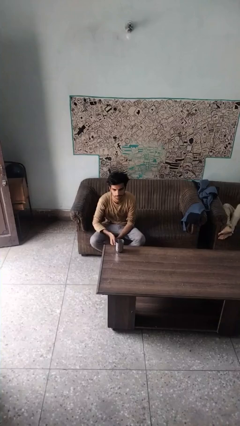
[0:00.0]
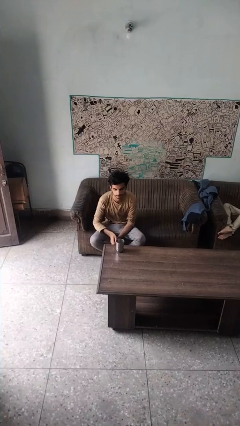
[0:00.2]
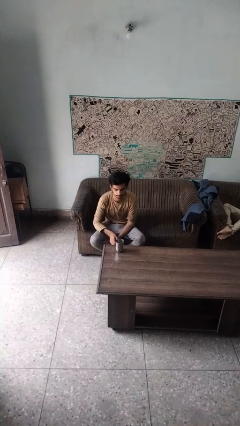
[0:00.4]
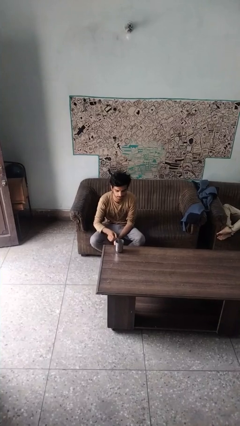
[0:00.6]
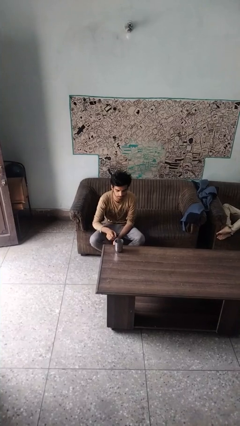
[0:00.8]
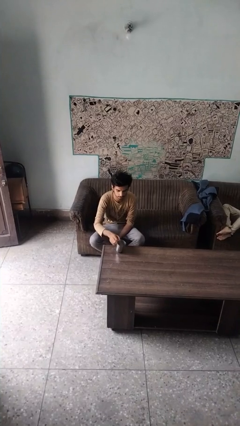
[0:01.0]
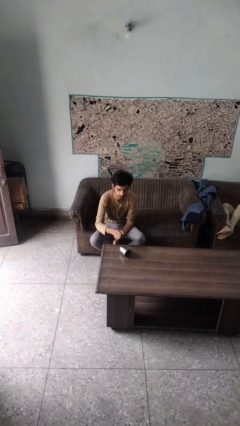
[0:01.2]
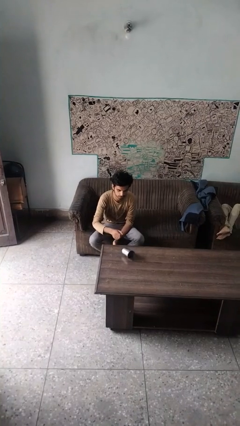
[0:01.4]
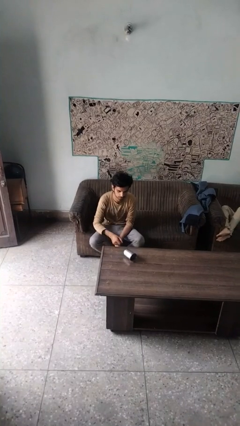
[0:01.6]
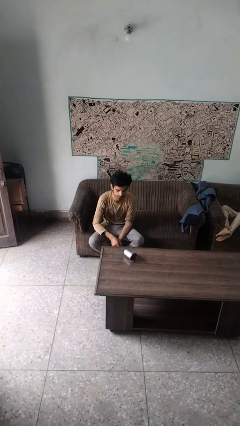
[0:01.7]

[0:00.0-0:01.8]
person knocks over glass

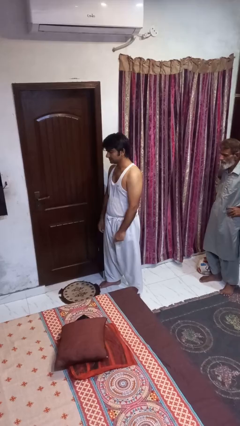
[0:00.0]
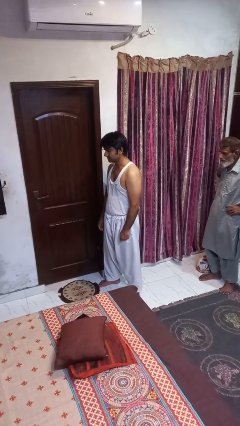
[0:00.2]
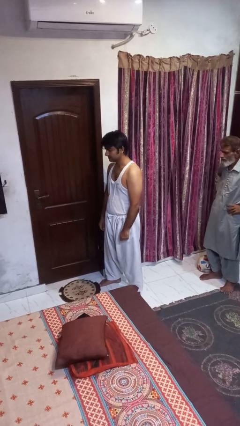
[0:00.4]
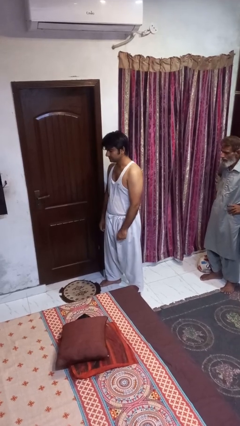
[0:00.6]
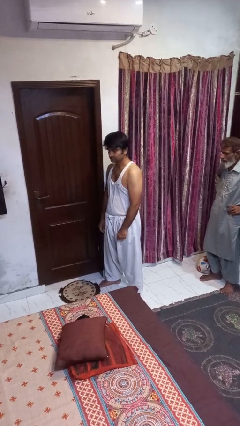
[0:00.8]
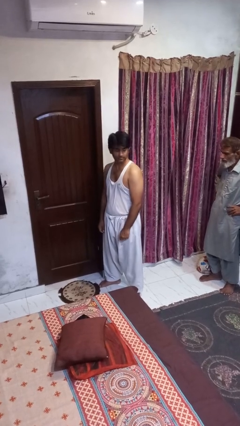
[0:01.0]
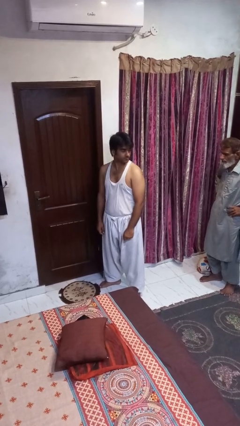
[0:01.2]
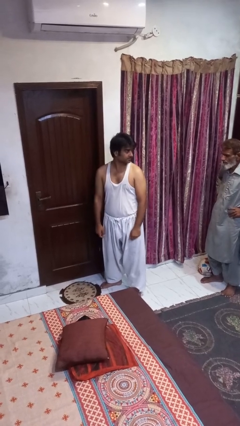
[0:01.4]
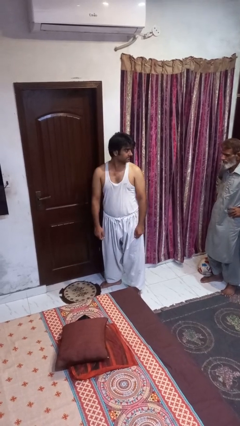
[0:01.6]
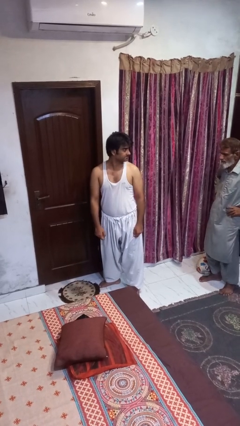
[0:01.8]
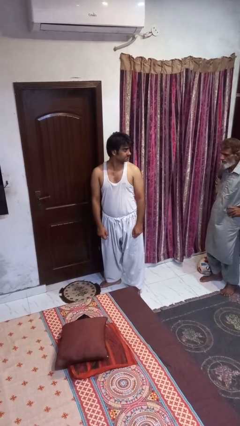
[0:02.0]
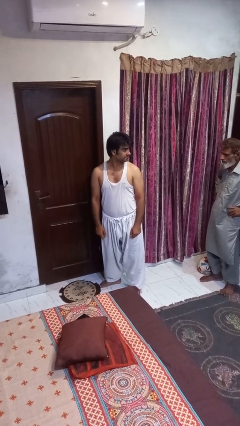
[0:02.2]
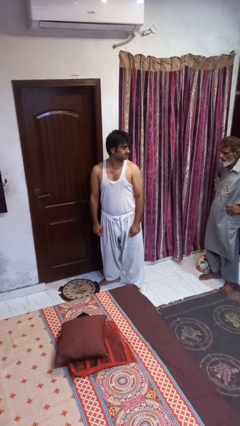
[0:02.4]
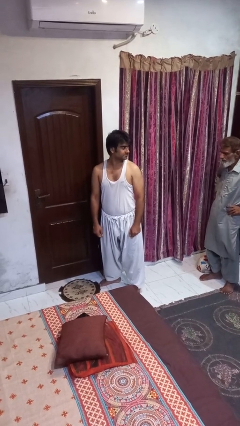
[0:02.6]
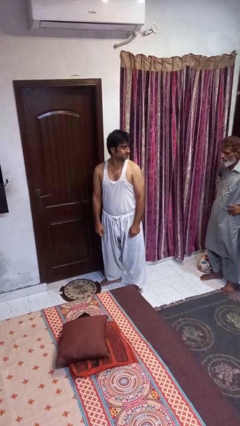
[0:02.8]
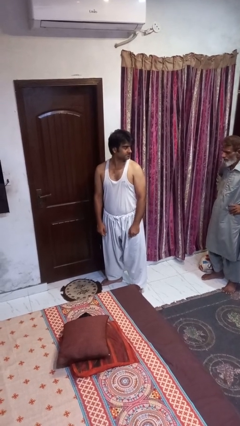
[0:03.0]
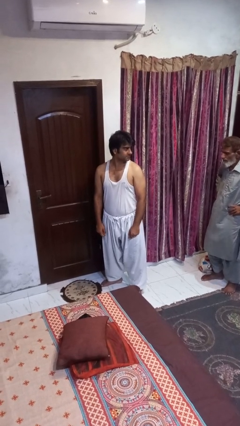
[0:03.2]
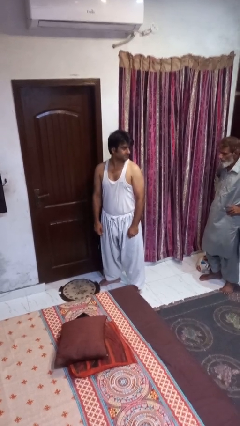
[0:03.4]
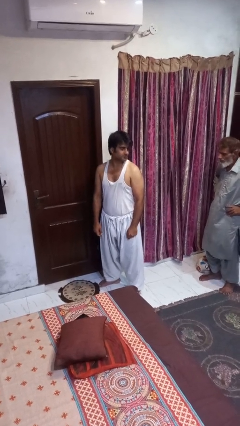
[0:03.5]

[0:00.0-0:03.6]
person looks over shoulder

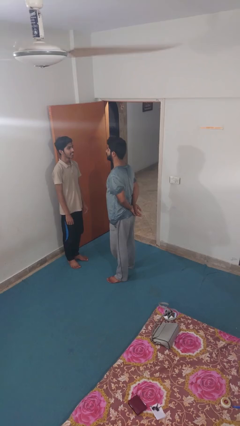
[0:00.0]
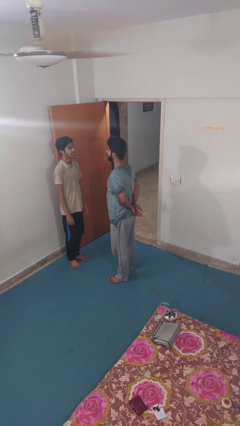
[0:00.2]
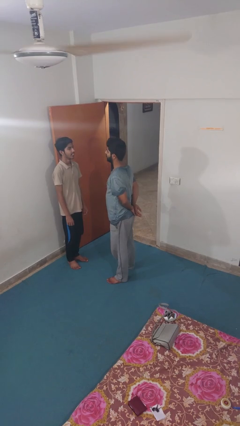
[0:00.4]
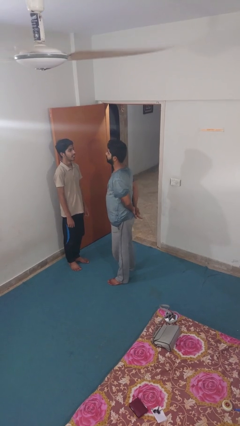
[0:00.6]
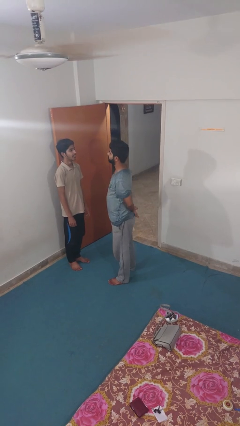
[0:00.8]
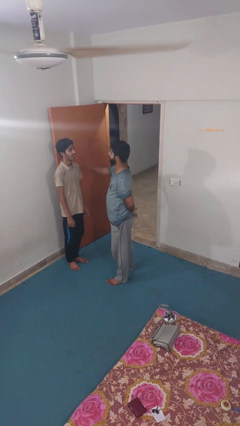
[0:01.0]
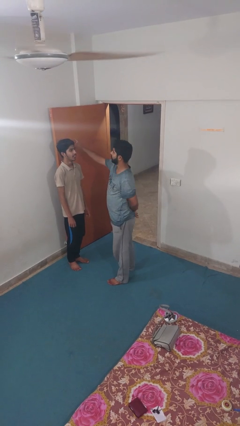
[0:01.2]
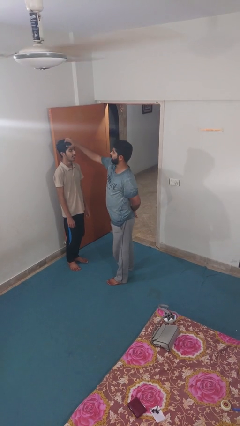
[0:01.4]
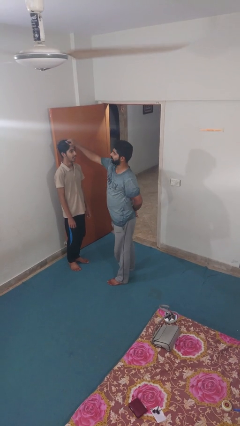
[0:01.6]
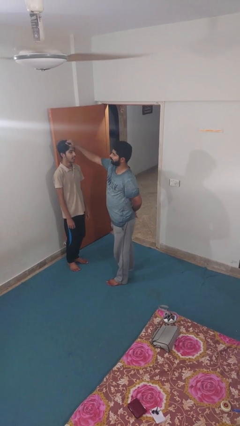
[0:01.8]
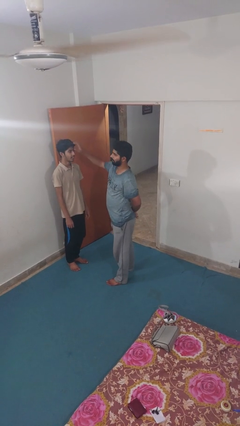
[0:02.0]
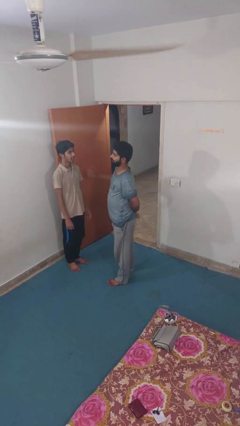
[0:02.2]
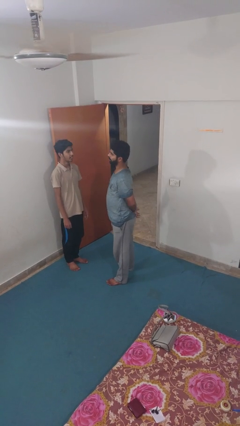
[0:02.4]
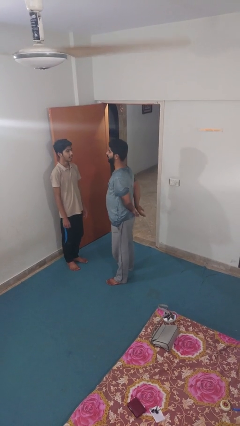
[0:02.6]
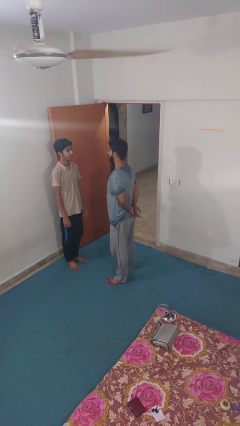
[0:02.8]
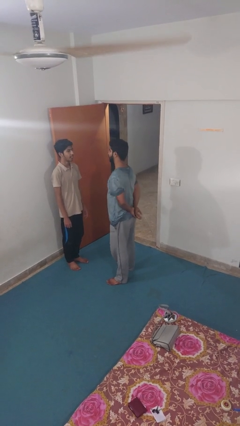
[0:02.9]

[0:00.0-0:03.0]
person grabs person by hair

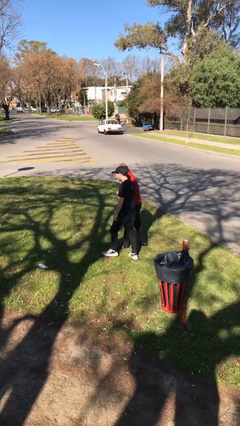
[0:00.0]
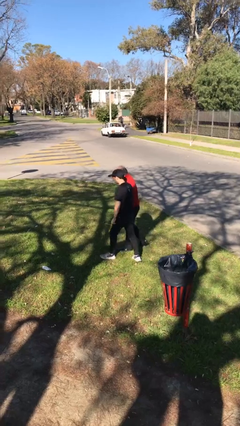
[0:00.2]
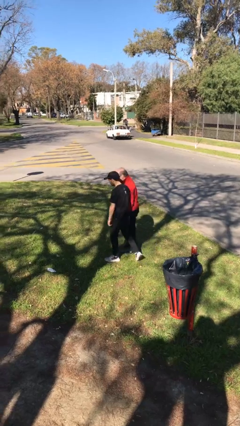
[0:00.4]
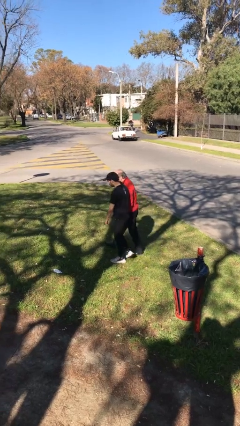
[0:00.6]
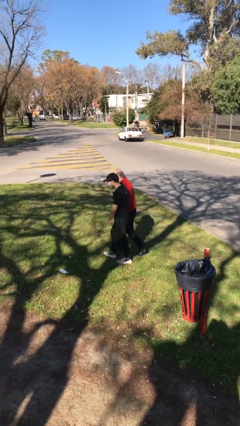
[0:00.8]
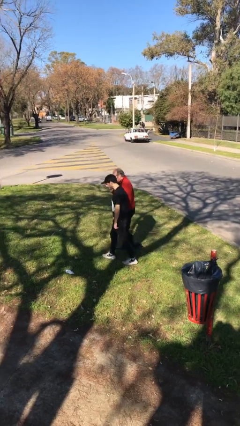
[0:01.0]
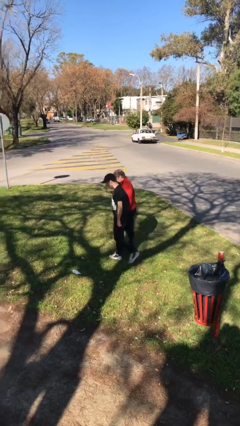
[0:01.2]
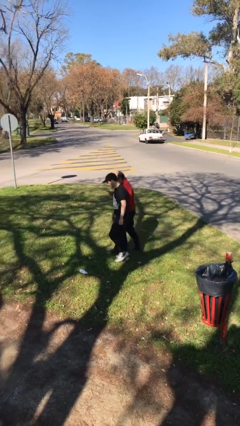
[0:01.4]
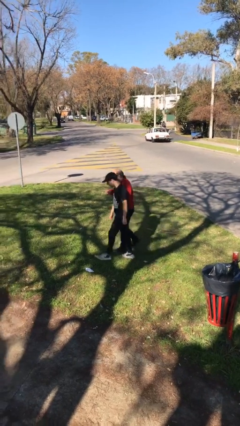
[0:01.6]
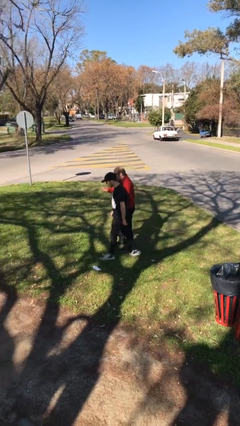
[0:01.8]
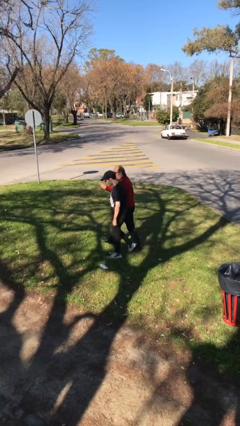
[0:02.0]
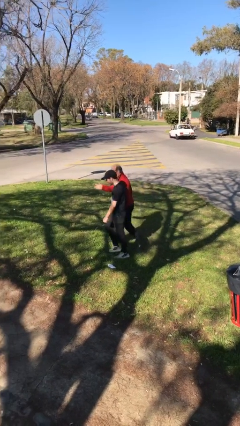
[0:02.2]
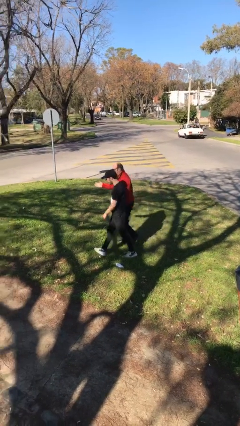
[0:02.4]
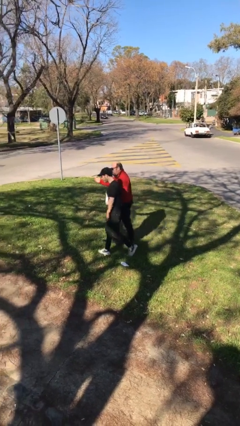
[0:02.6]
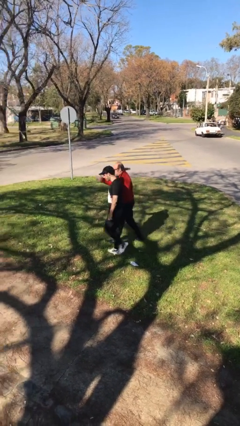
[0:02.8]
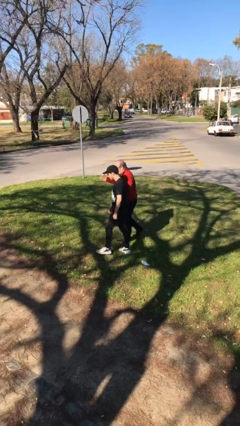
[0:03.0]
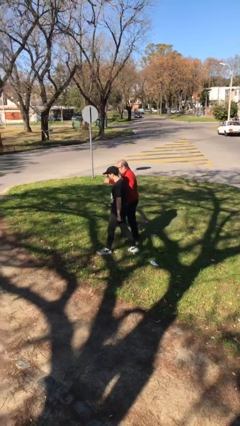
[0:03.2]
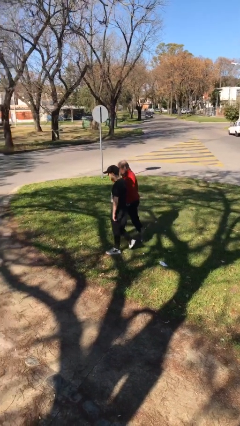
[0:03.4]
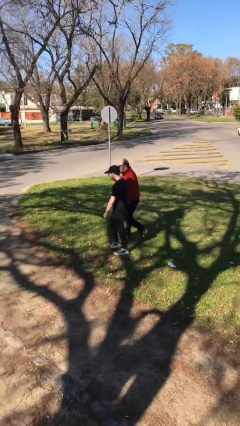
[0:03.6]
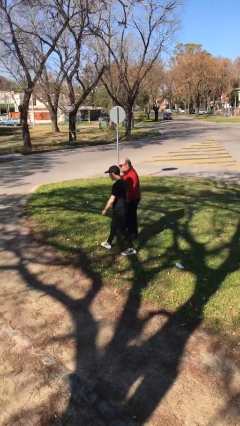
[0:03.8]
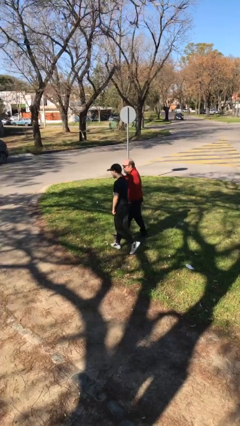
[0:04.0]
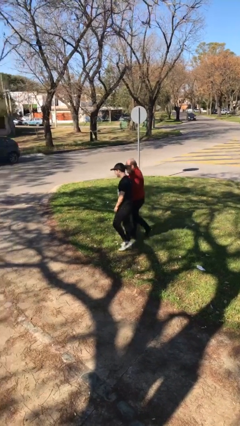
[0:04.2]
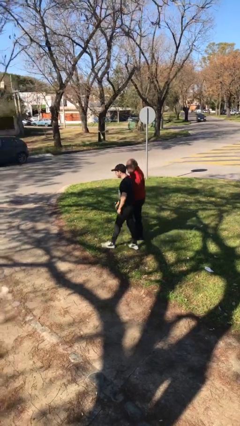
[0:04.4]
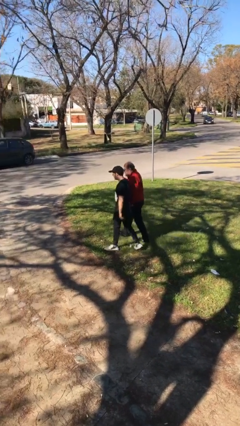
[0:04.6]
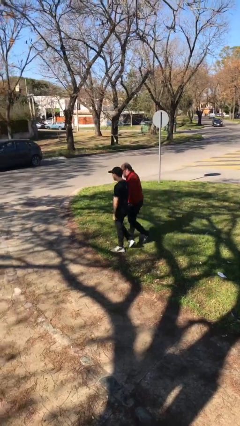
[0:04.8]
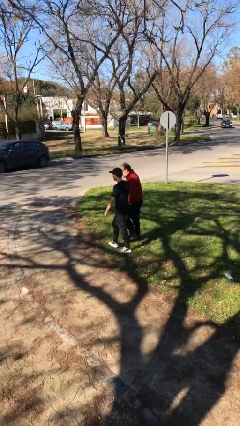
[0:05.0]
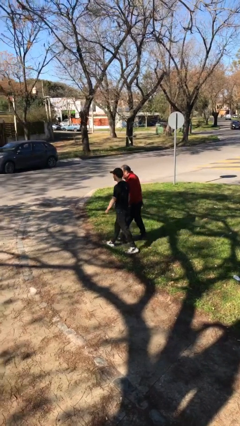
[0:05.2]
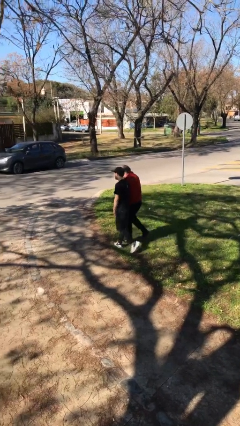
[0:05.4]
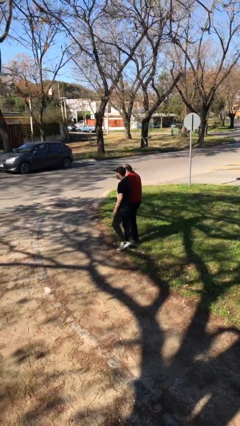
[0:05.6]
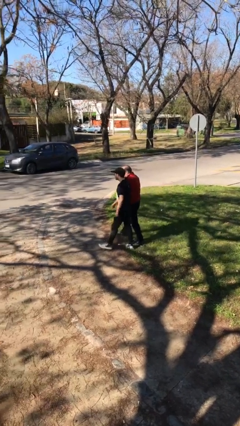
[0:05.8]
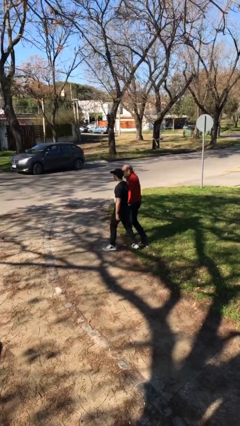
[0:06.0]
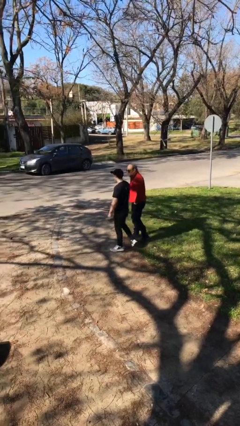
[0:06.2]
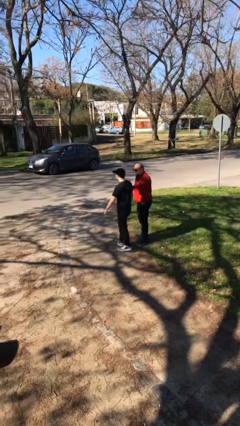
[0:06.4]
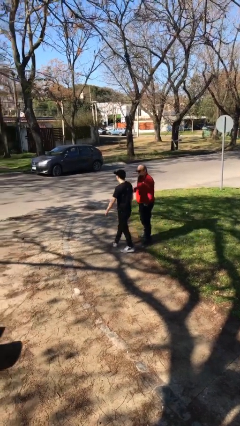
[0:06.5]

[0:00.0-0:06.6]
person talks to person

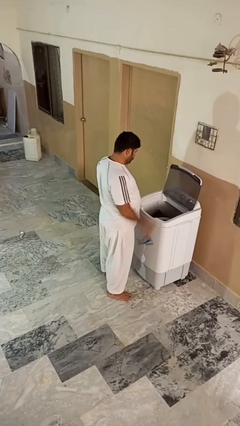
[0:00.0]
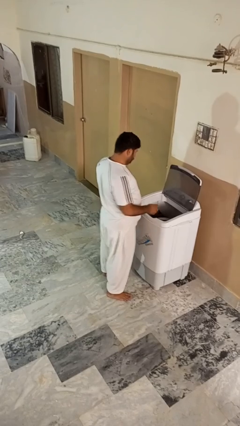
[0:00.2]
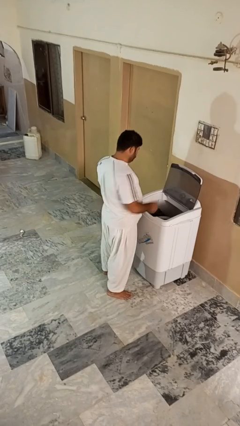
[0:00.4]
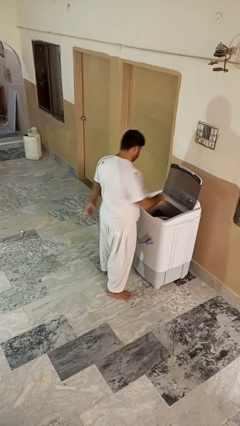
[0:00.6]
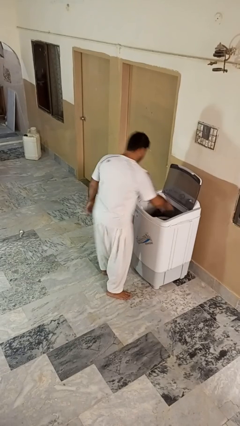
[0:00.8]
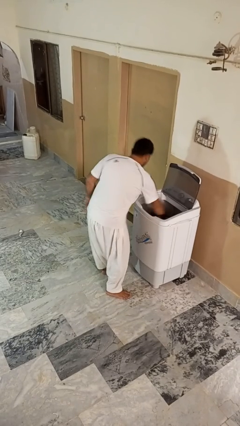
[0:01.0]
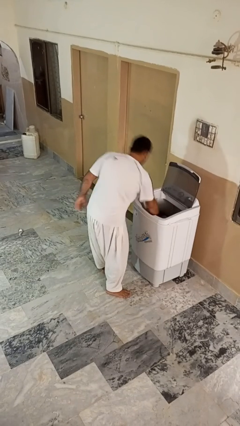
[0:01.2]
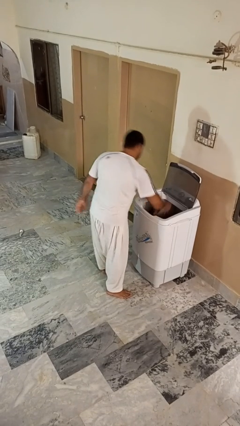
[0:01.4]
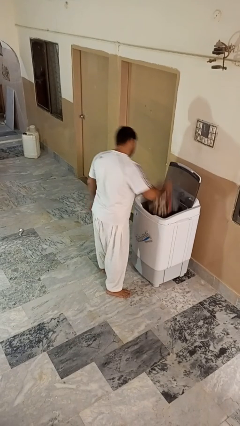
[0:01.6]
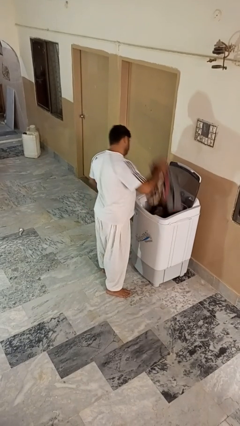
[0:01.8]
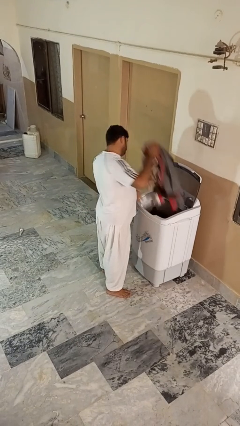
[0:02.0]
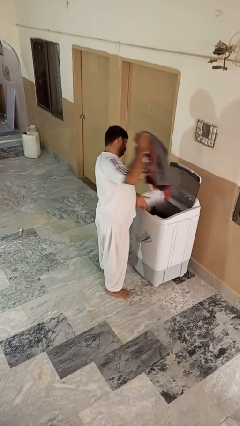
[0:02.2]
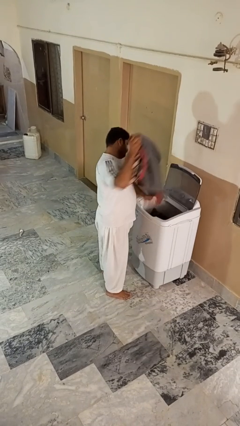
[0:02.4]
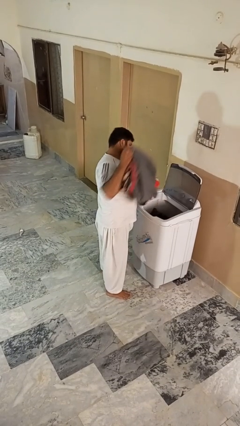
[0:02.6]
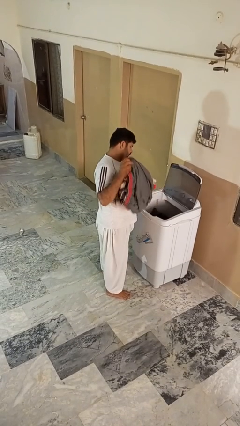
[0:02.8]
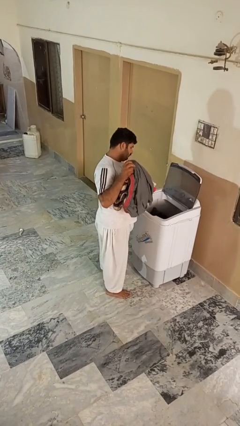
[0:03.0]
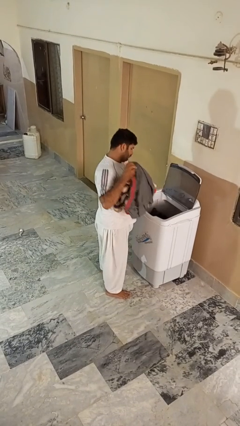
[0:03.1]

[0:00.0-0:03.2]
person unloads clotheswasher
